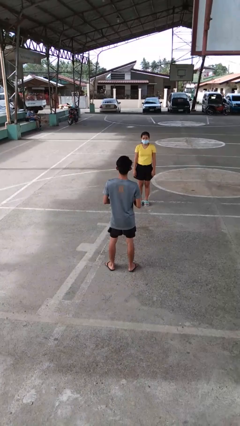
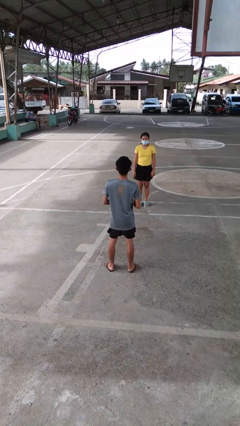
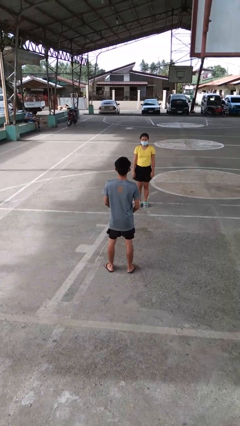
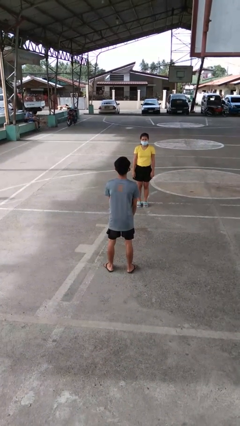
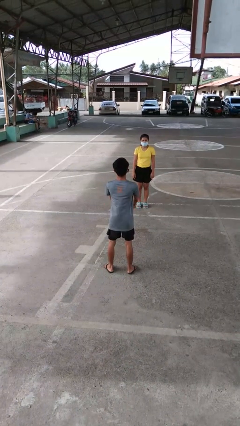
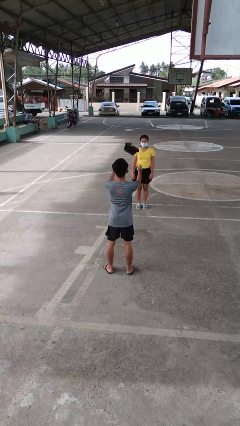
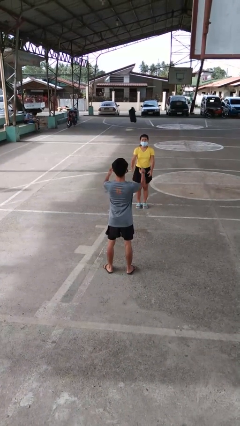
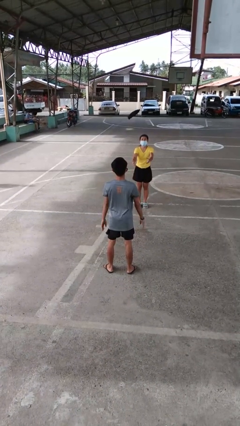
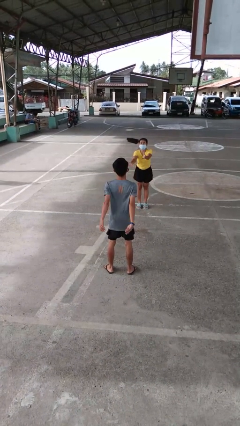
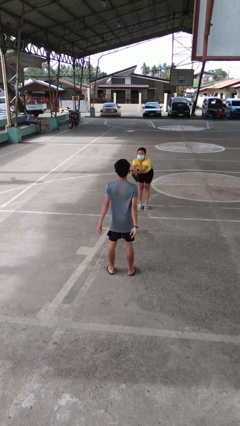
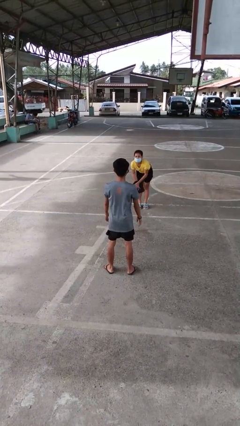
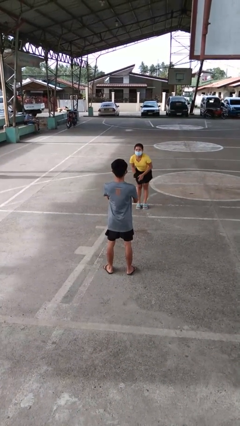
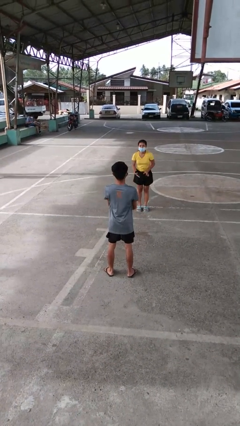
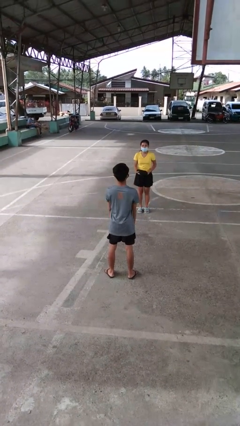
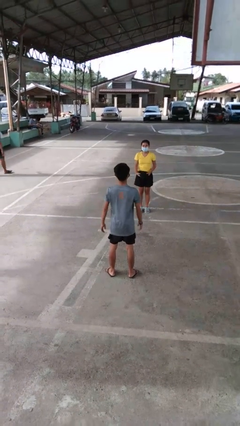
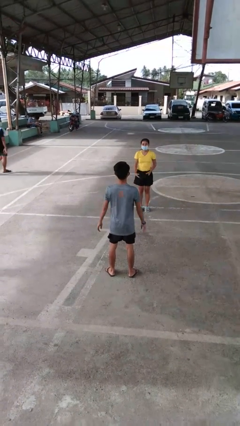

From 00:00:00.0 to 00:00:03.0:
person throws object to person

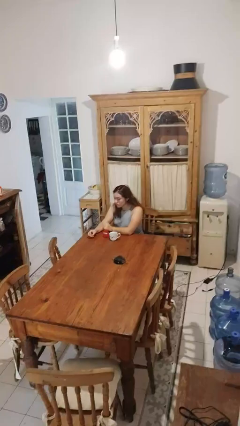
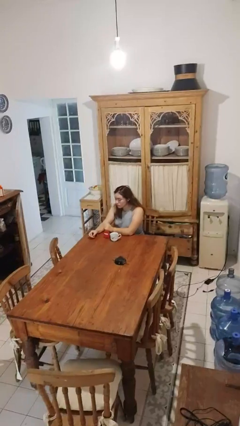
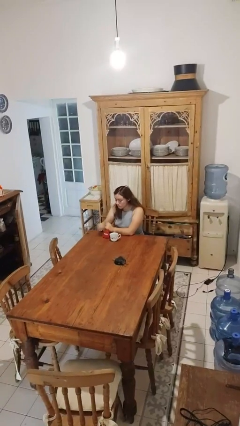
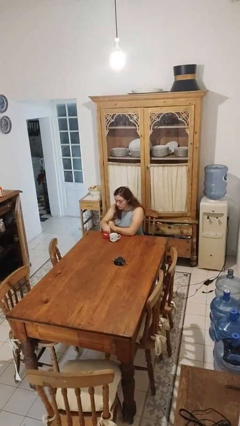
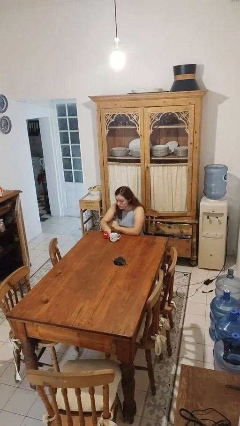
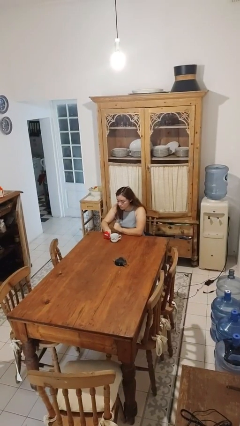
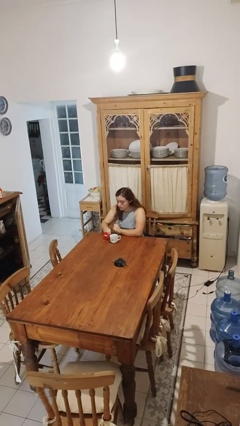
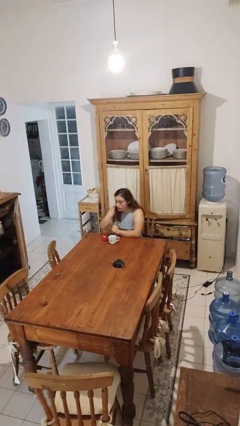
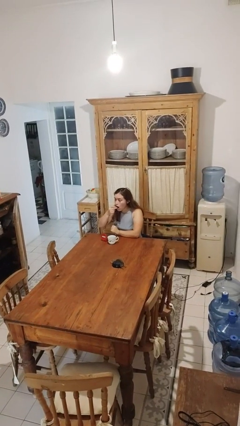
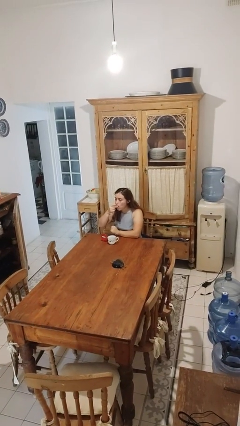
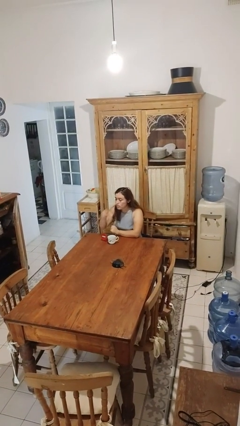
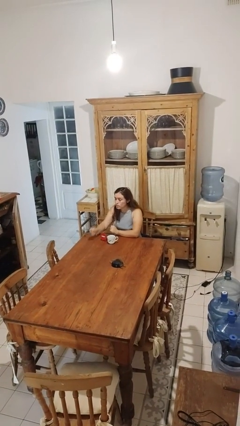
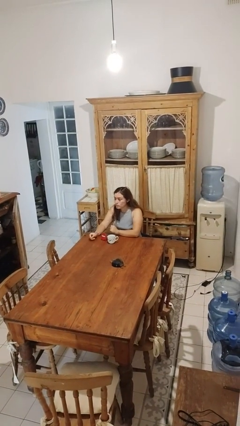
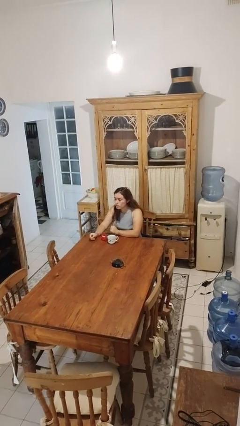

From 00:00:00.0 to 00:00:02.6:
person takes medicine pills

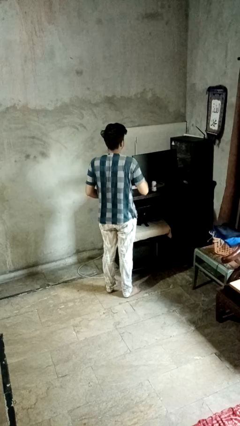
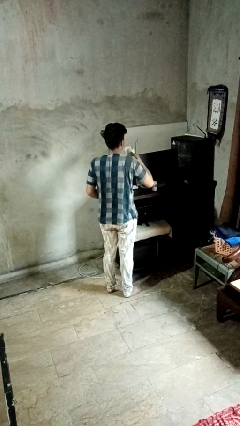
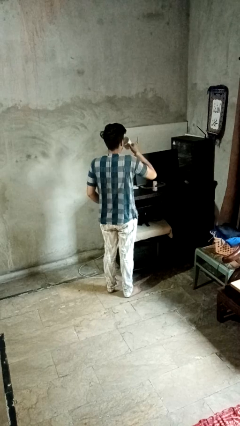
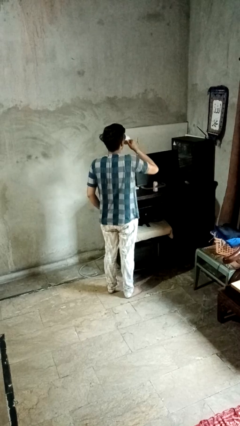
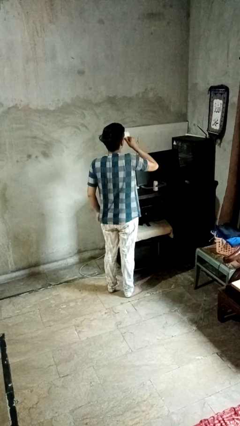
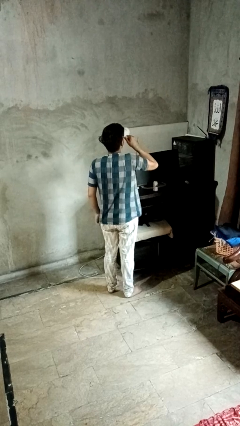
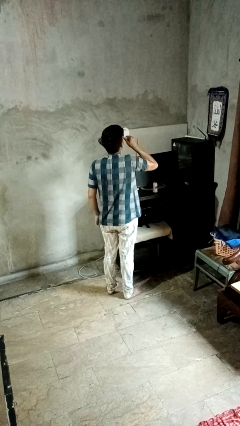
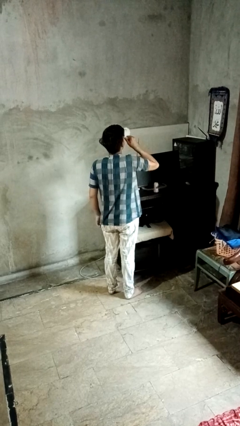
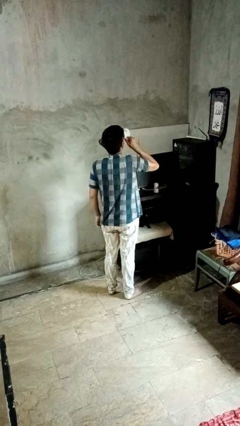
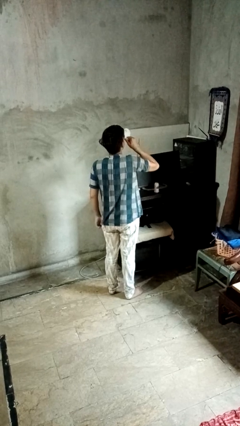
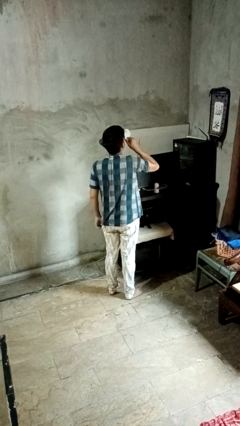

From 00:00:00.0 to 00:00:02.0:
person drinks from cup

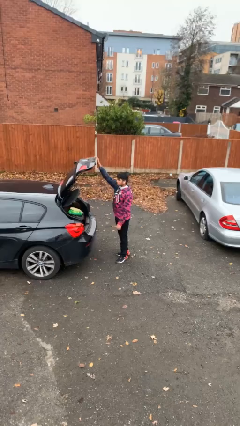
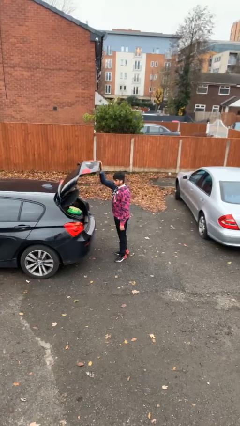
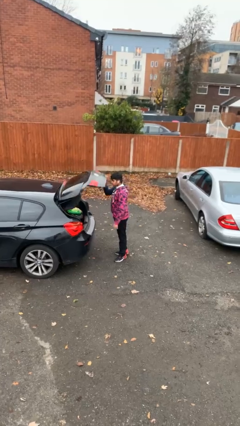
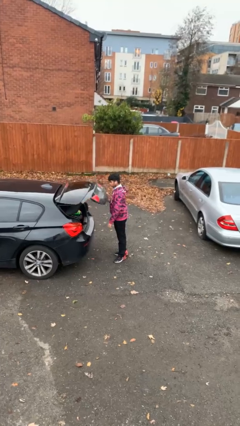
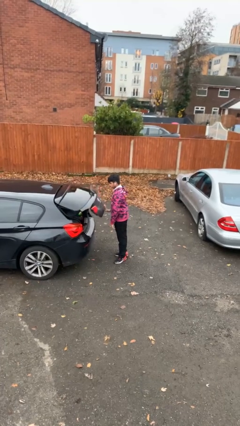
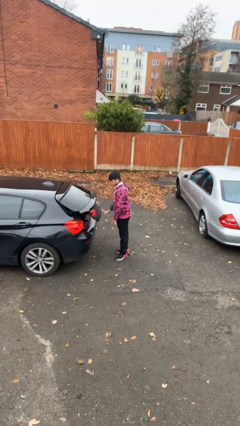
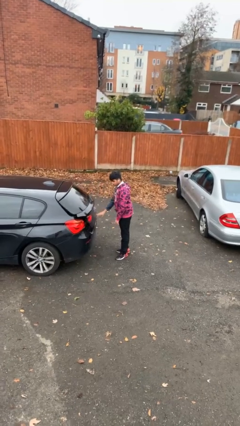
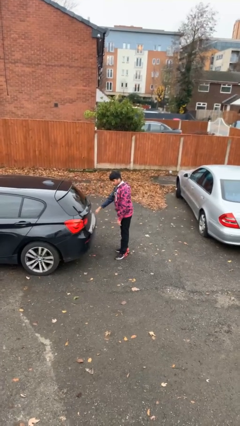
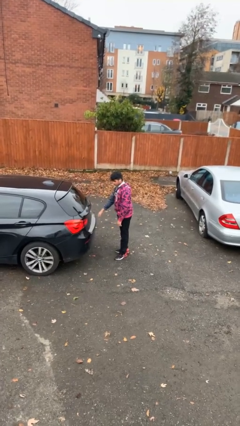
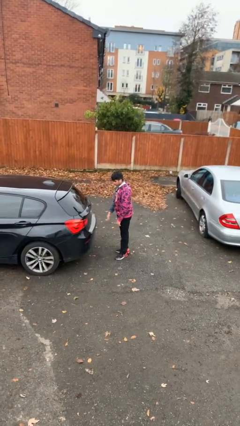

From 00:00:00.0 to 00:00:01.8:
person closes car trunk

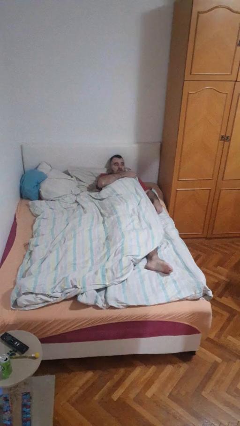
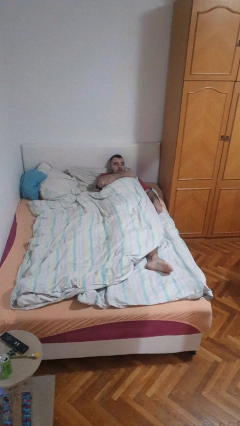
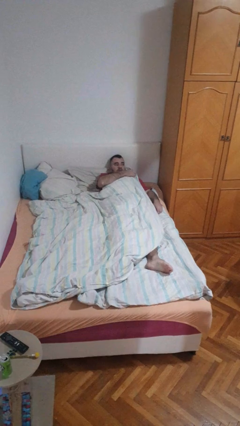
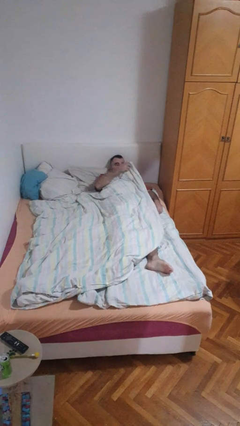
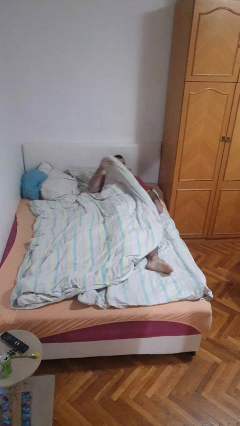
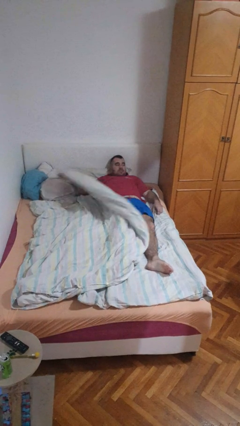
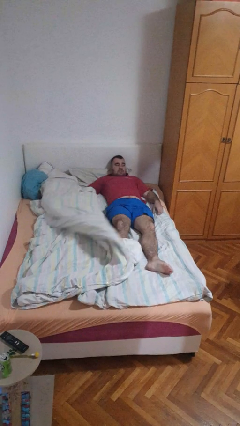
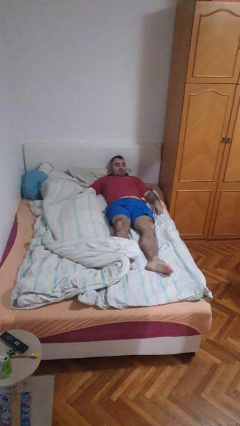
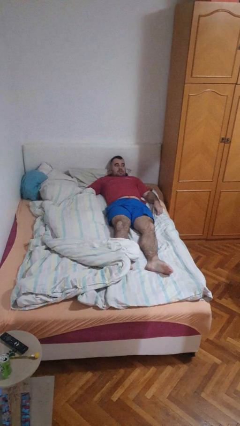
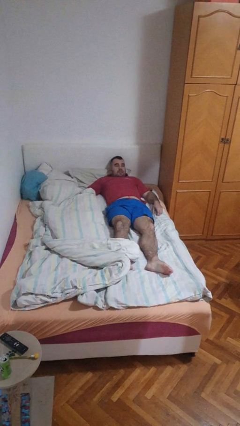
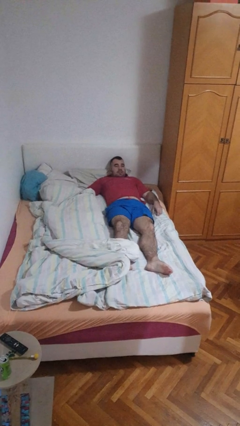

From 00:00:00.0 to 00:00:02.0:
person uncovers with bedsheets

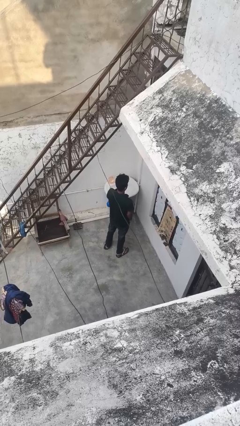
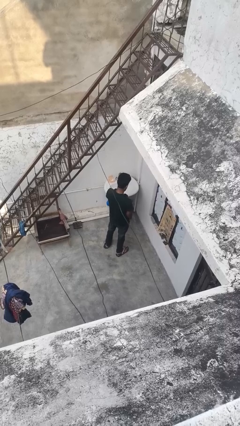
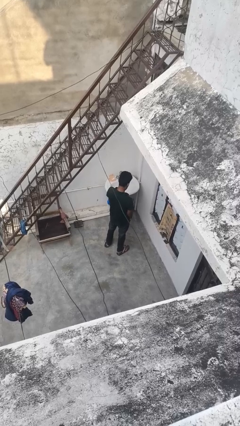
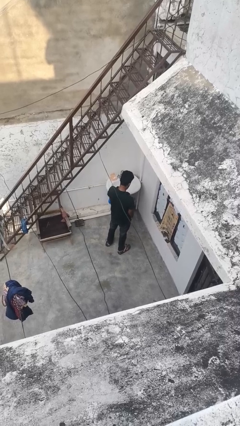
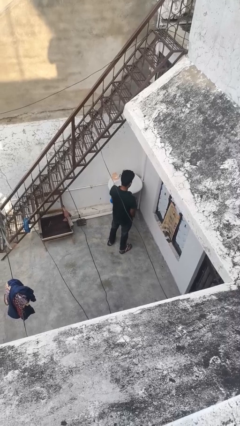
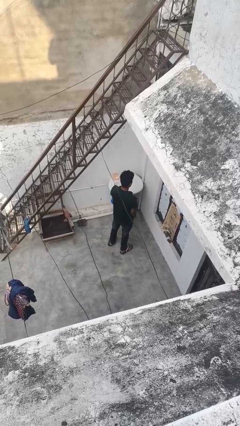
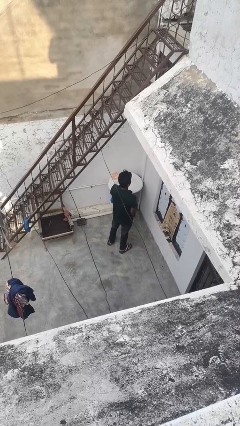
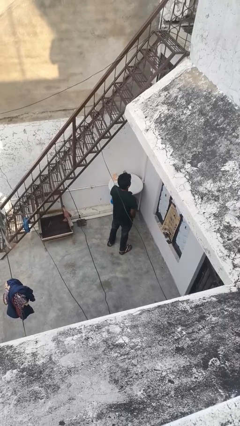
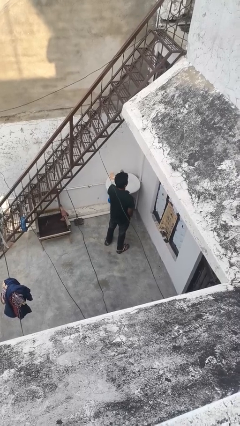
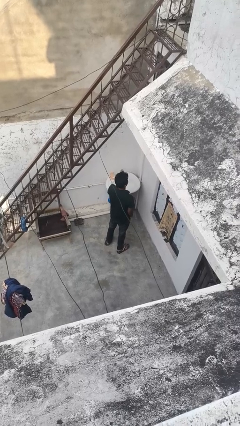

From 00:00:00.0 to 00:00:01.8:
person strokes chin

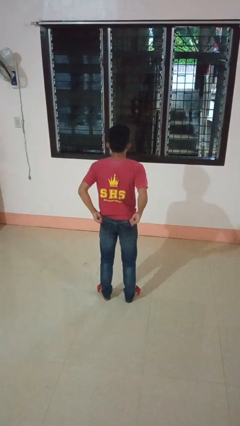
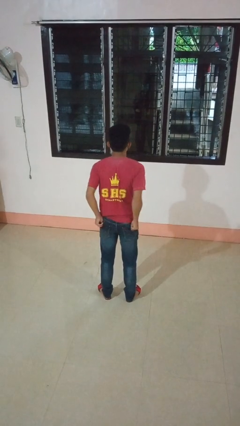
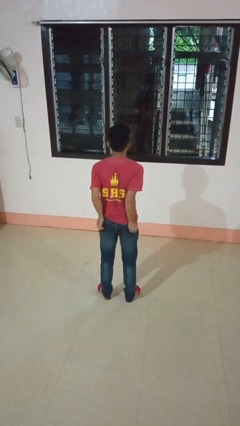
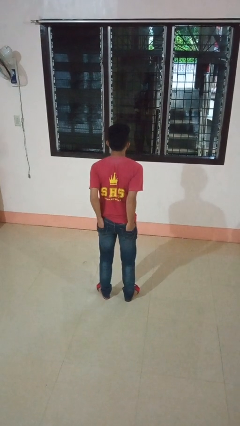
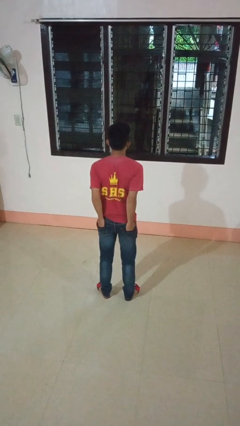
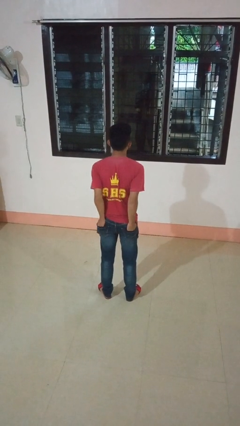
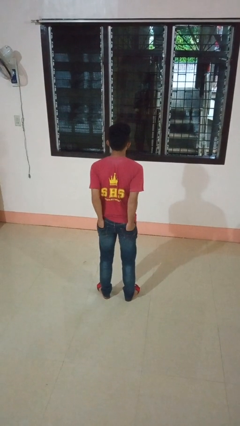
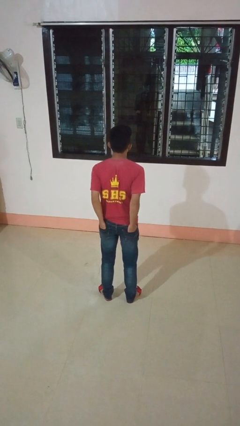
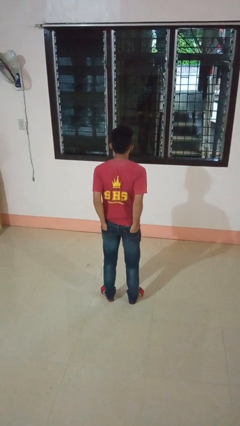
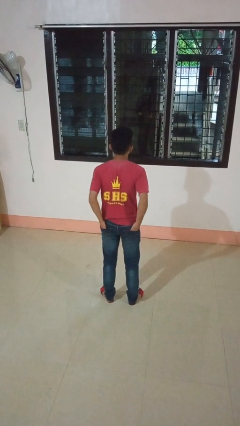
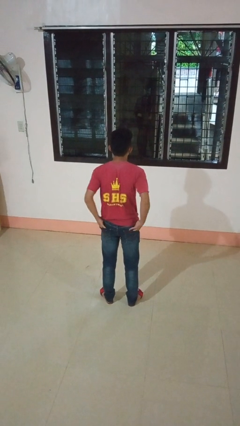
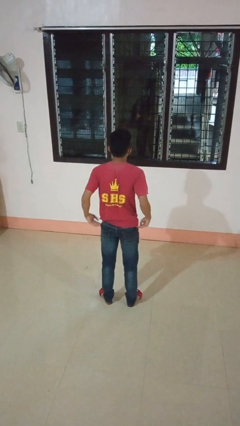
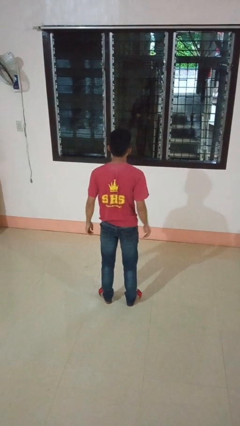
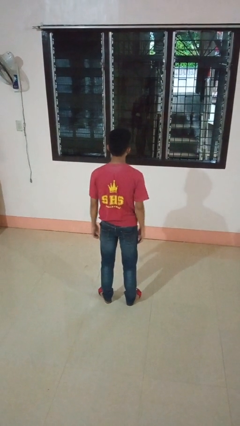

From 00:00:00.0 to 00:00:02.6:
person puts hands in back pockets

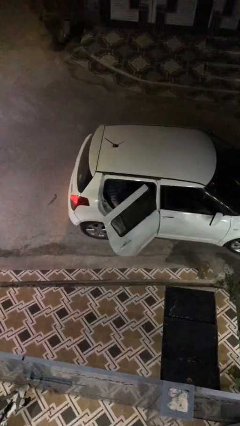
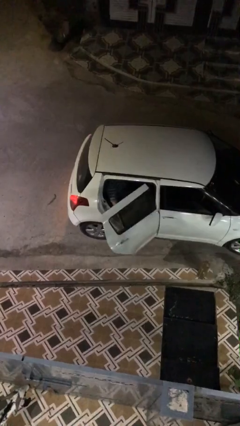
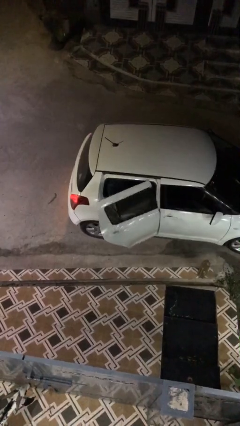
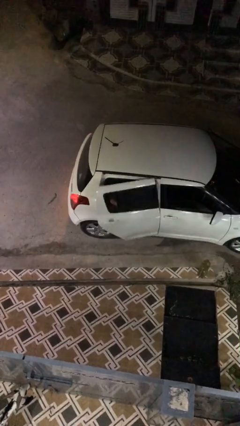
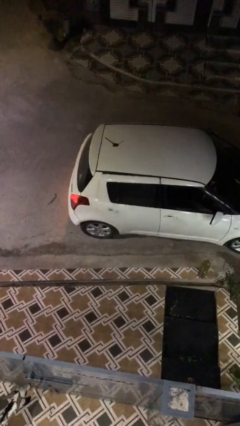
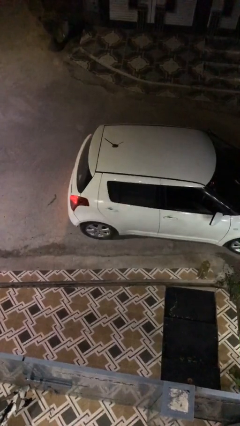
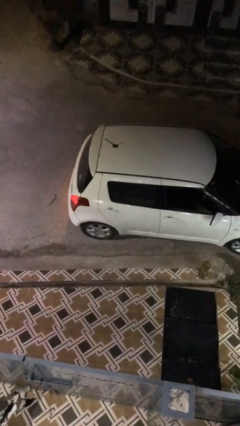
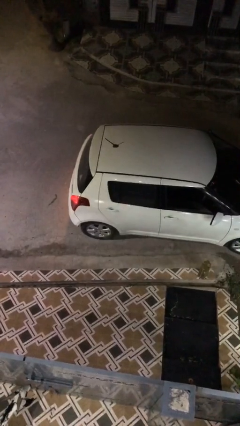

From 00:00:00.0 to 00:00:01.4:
person closes car door
